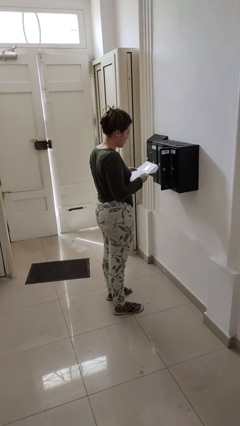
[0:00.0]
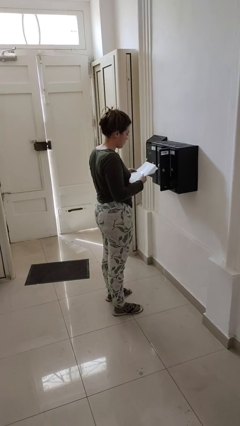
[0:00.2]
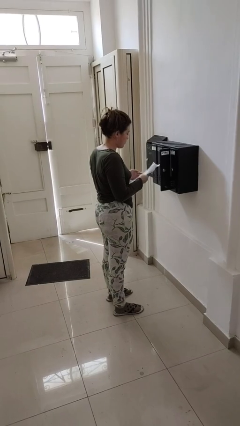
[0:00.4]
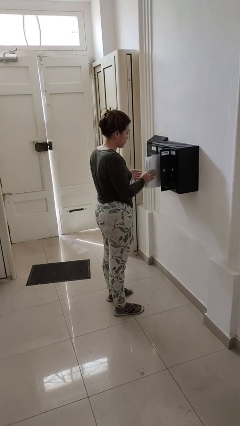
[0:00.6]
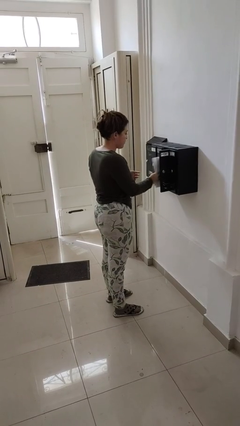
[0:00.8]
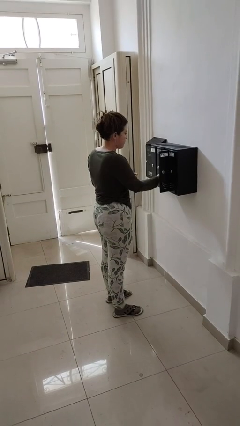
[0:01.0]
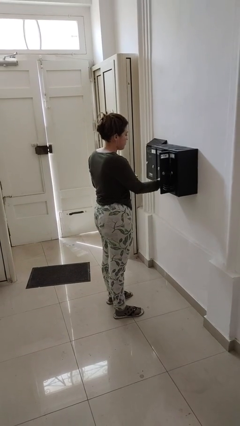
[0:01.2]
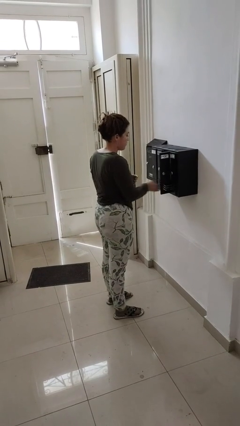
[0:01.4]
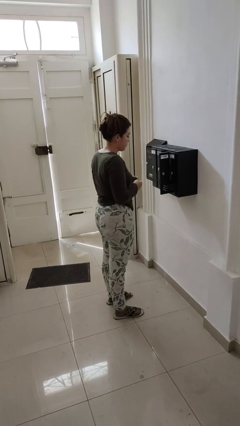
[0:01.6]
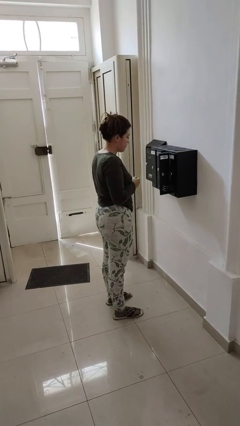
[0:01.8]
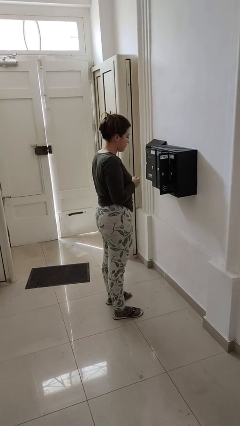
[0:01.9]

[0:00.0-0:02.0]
person puts letters in mailbox

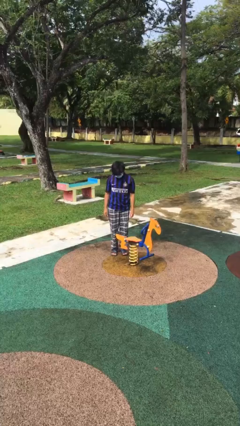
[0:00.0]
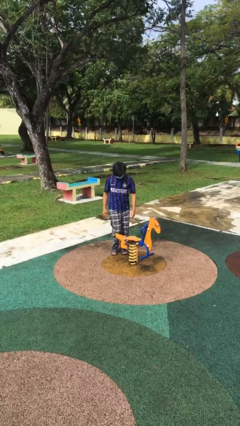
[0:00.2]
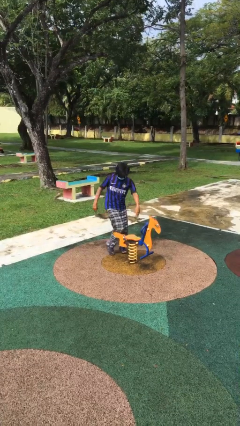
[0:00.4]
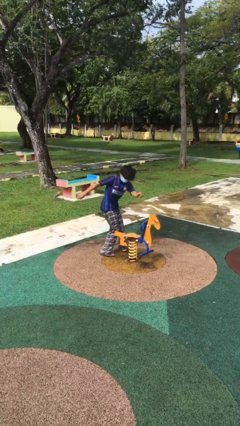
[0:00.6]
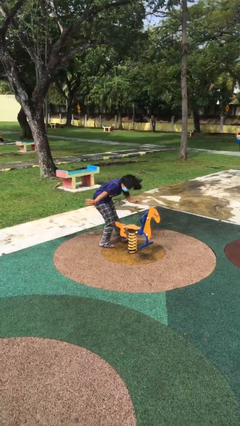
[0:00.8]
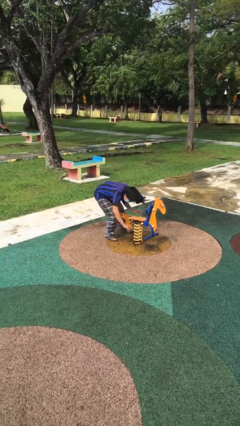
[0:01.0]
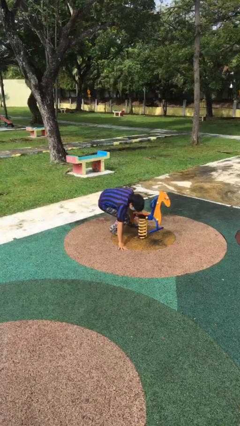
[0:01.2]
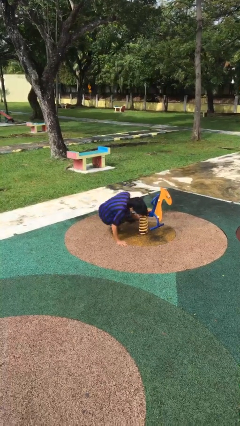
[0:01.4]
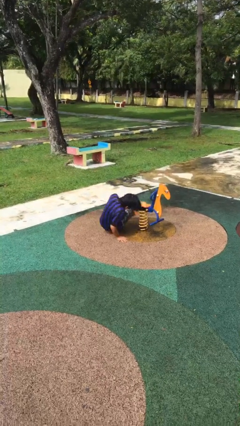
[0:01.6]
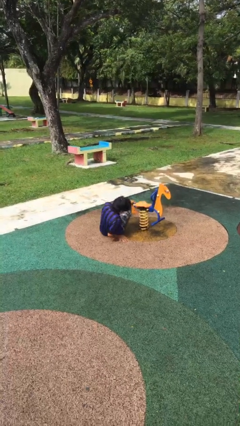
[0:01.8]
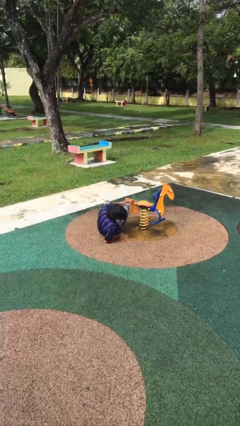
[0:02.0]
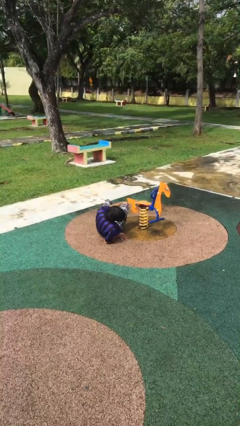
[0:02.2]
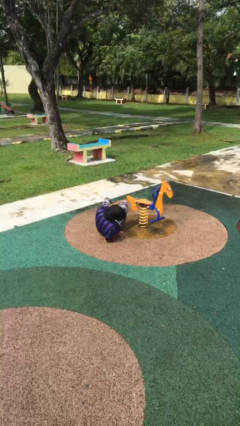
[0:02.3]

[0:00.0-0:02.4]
person trips on object on floor

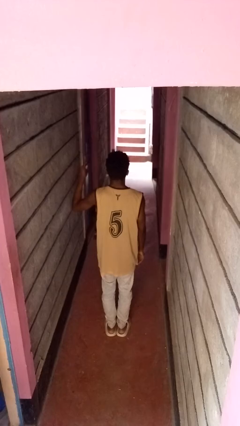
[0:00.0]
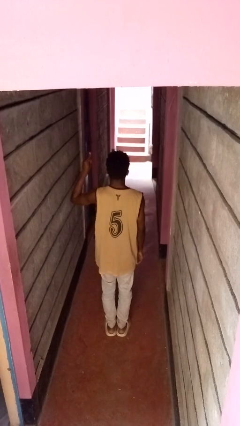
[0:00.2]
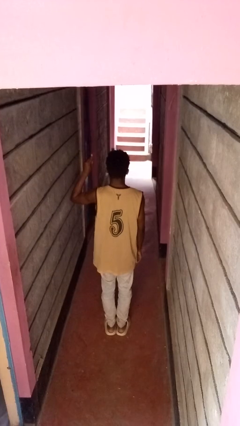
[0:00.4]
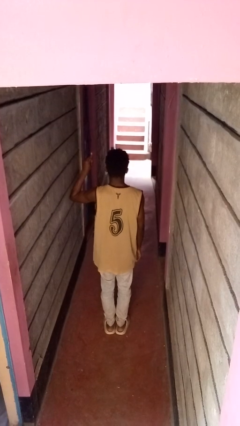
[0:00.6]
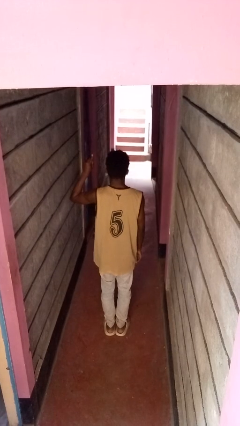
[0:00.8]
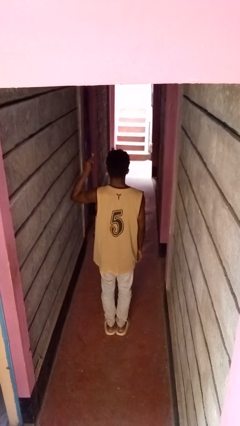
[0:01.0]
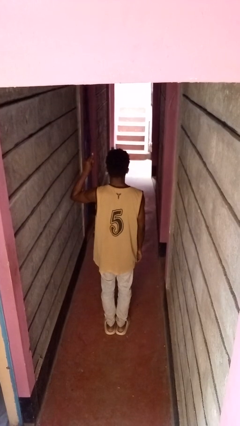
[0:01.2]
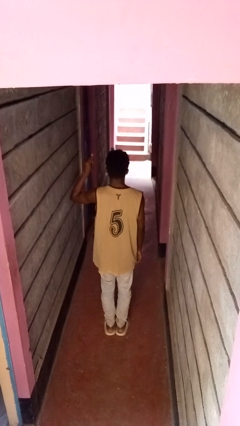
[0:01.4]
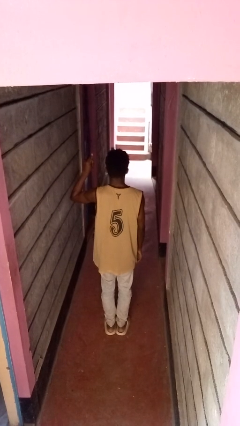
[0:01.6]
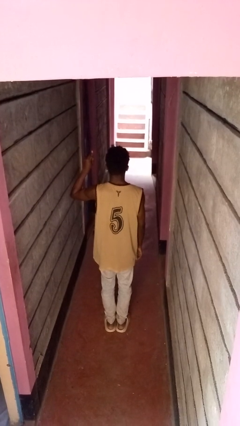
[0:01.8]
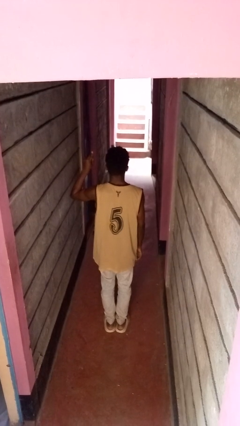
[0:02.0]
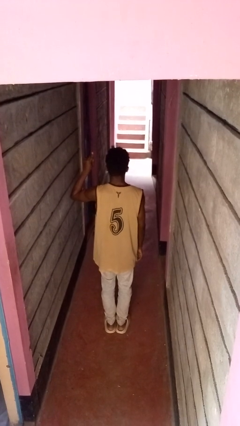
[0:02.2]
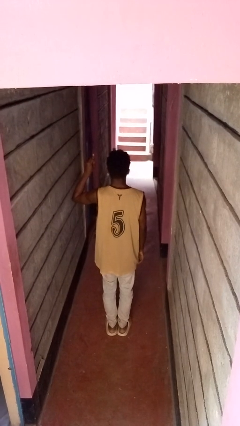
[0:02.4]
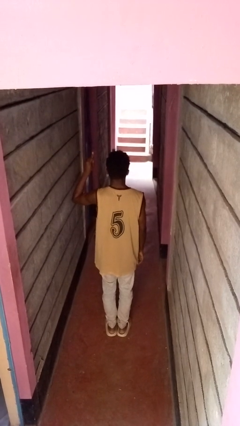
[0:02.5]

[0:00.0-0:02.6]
person gestures number one

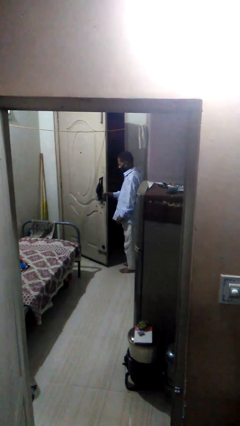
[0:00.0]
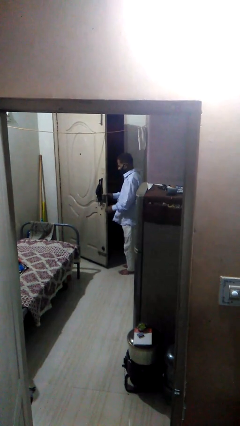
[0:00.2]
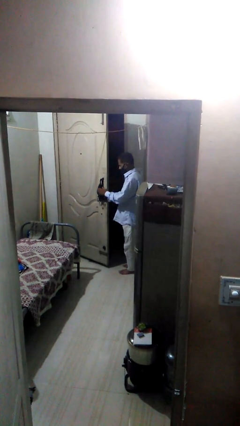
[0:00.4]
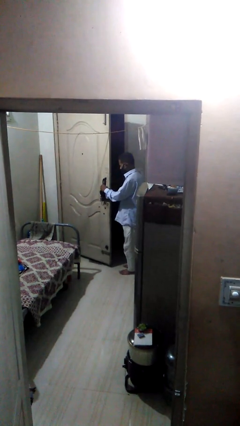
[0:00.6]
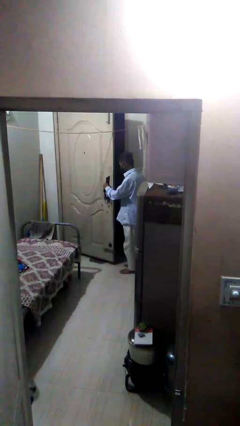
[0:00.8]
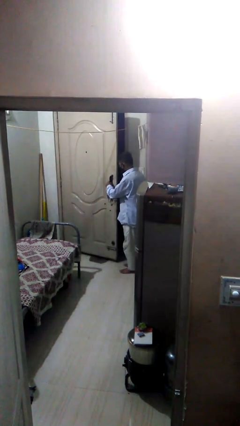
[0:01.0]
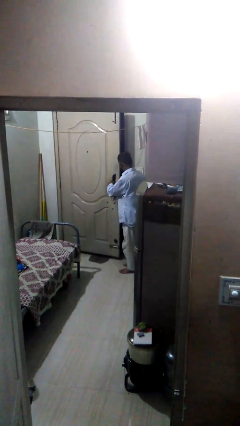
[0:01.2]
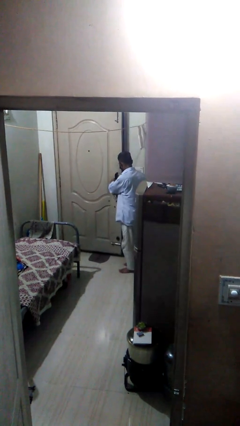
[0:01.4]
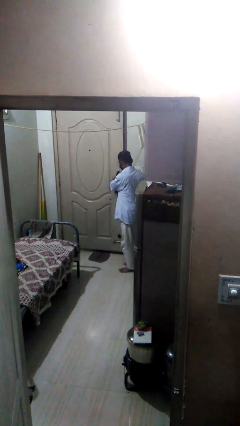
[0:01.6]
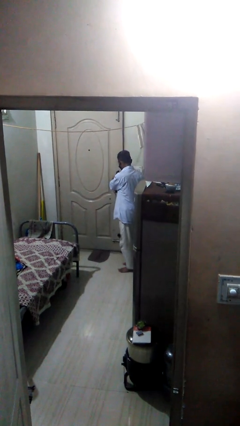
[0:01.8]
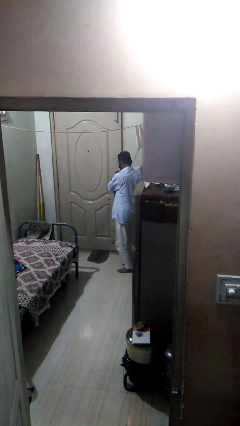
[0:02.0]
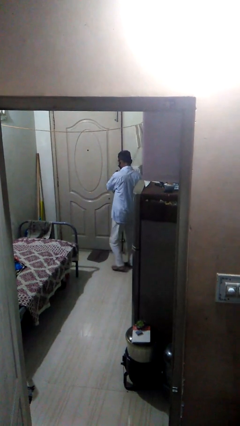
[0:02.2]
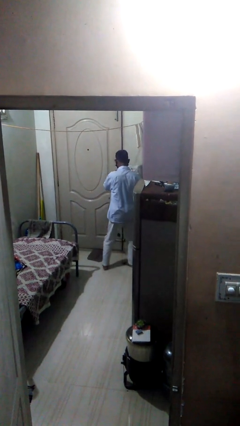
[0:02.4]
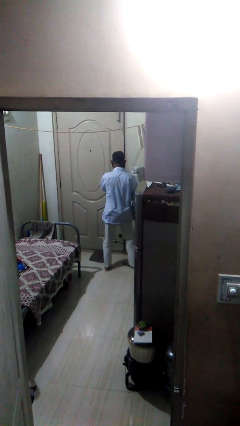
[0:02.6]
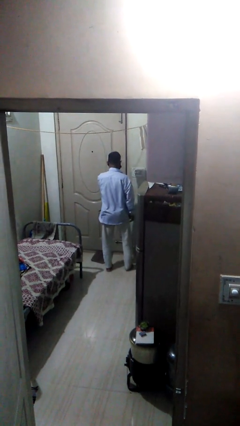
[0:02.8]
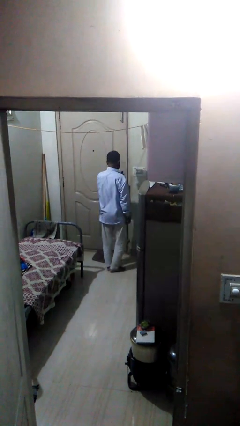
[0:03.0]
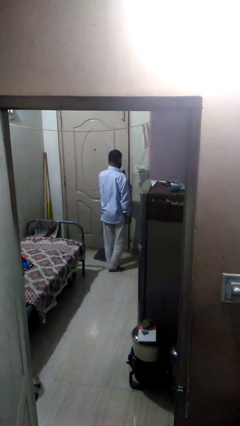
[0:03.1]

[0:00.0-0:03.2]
person closes facility door

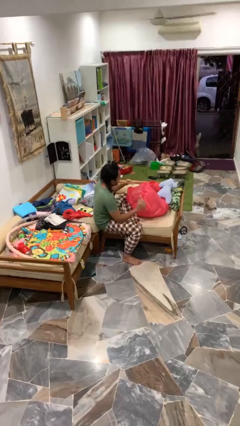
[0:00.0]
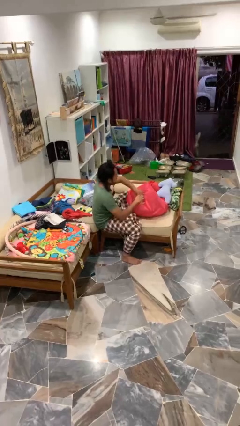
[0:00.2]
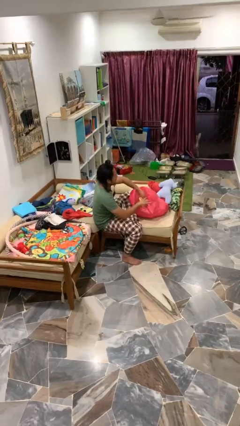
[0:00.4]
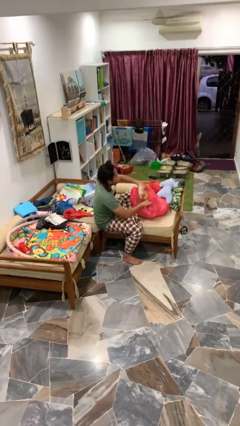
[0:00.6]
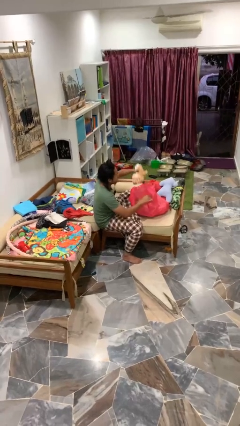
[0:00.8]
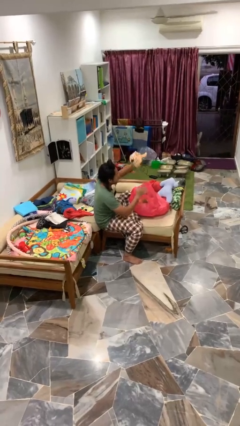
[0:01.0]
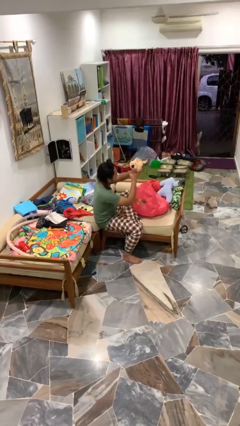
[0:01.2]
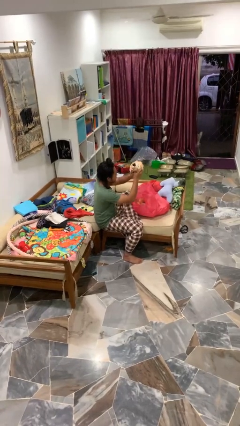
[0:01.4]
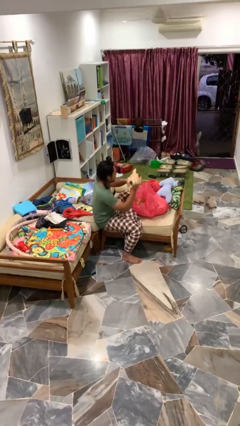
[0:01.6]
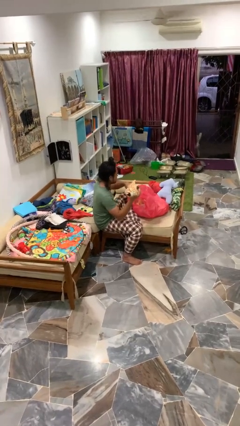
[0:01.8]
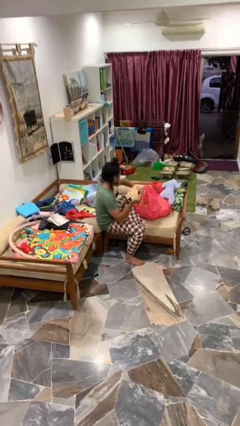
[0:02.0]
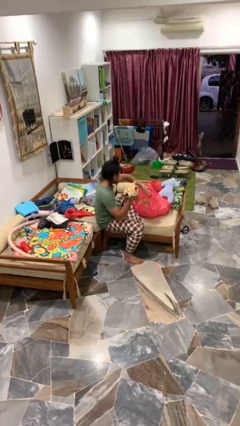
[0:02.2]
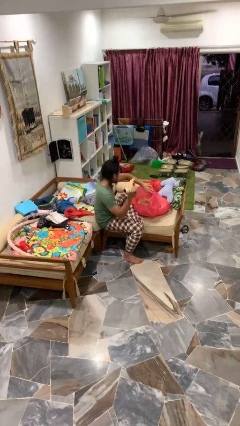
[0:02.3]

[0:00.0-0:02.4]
person takes object from bag

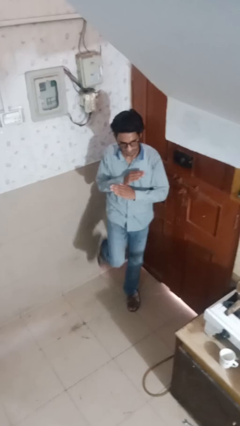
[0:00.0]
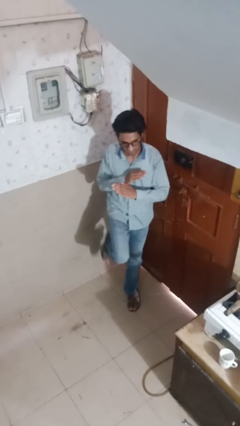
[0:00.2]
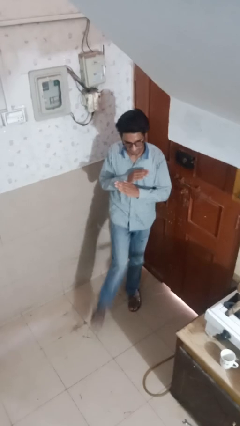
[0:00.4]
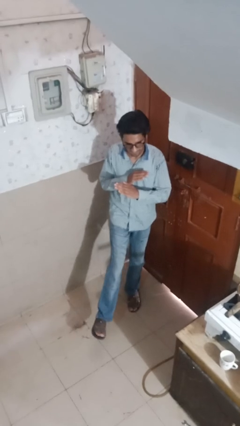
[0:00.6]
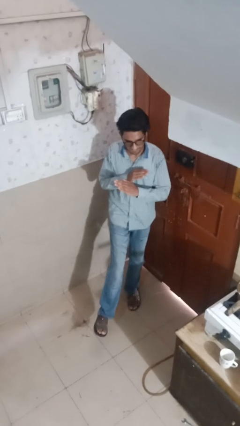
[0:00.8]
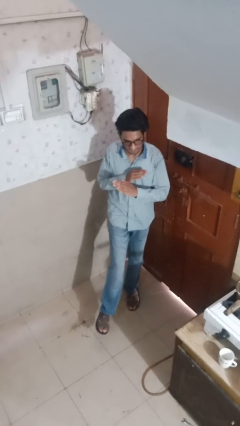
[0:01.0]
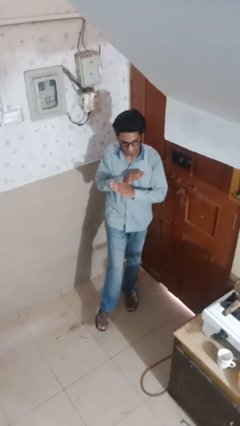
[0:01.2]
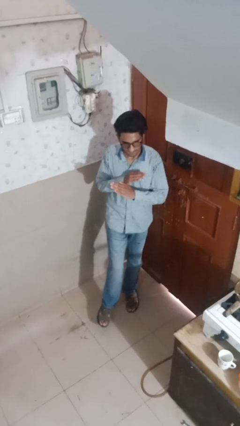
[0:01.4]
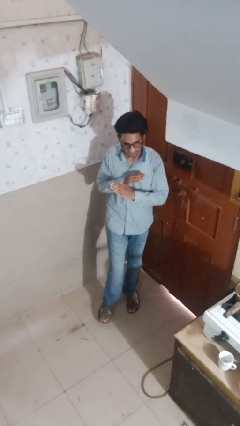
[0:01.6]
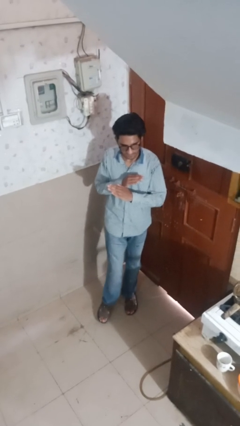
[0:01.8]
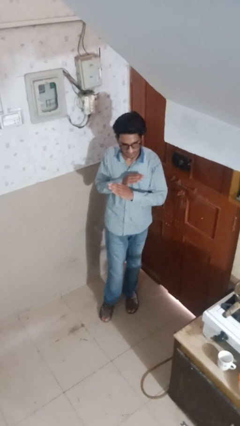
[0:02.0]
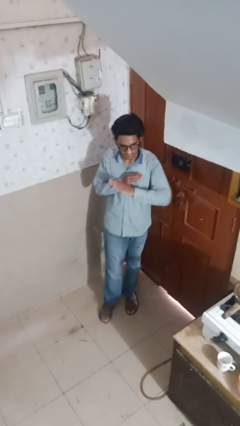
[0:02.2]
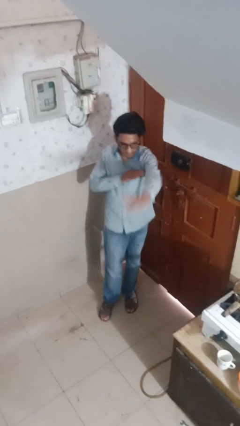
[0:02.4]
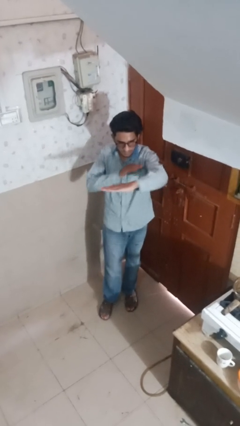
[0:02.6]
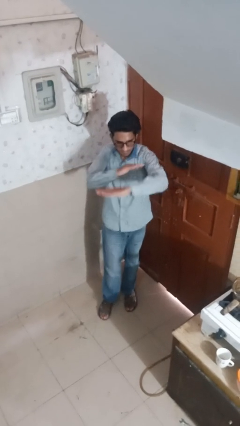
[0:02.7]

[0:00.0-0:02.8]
person karate kicks

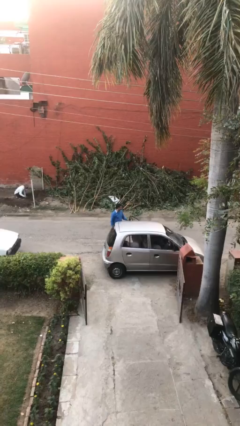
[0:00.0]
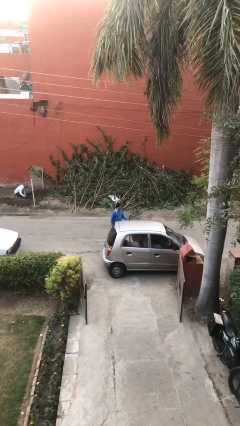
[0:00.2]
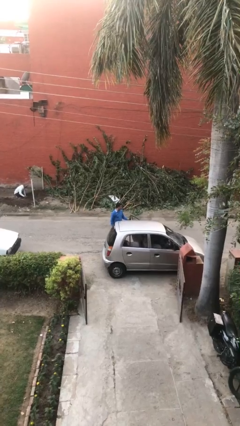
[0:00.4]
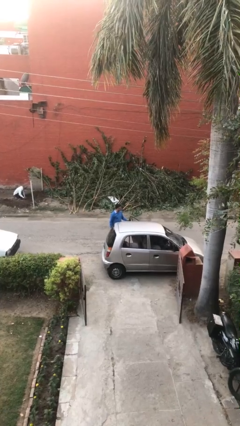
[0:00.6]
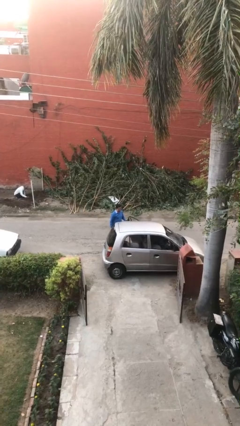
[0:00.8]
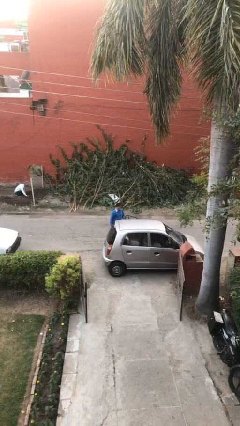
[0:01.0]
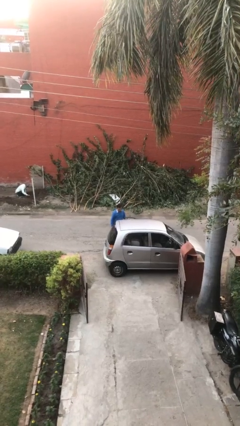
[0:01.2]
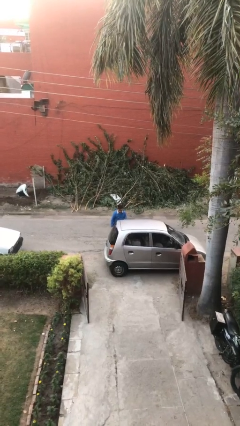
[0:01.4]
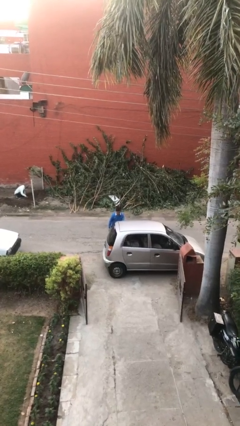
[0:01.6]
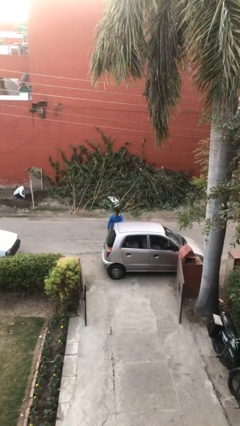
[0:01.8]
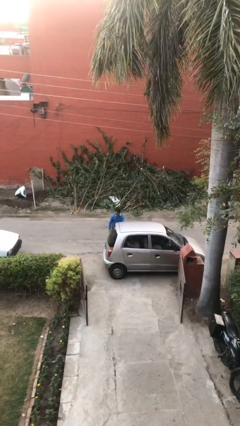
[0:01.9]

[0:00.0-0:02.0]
person closes car door
